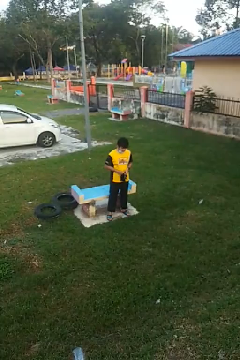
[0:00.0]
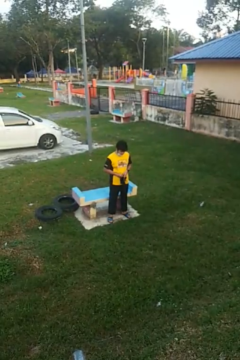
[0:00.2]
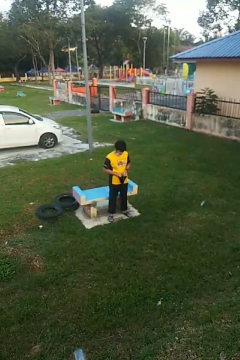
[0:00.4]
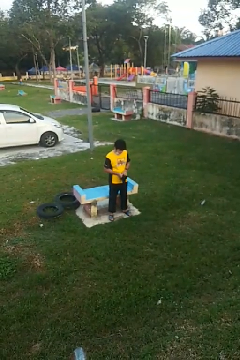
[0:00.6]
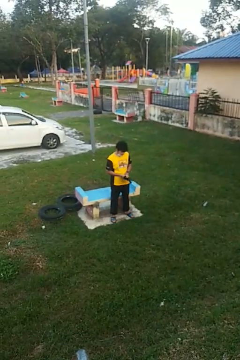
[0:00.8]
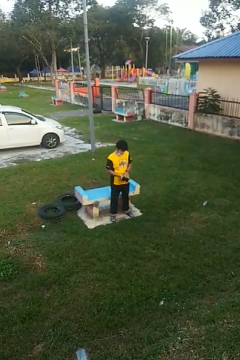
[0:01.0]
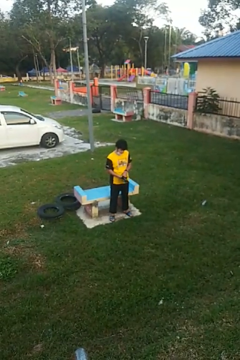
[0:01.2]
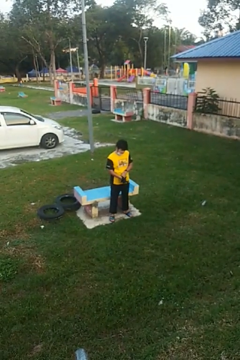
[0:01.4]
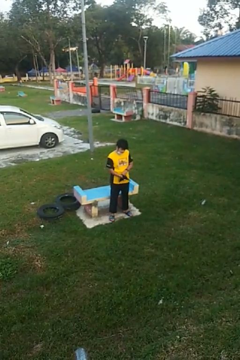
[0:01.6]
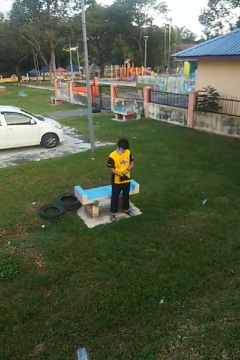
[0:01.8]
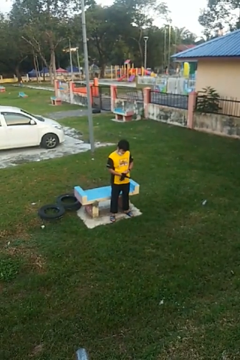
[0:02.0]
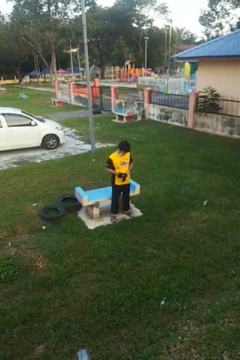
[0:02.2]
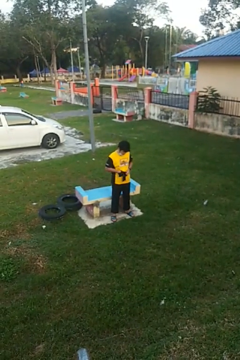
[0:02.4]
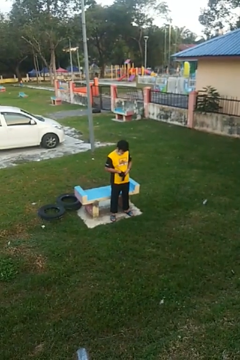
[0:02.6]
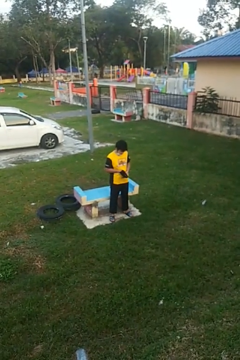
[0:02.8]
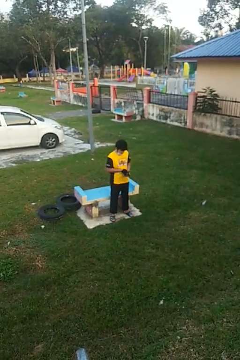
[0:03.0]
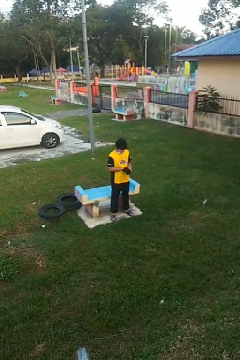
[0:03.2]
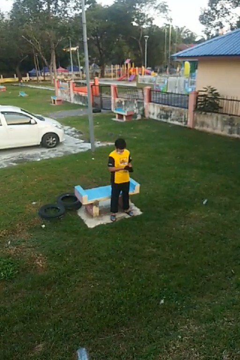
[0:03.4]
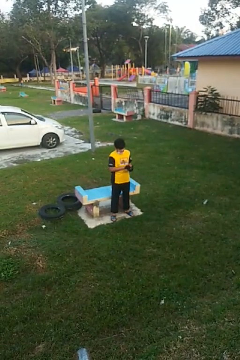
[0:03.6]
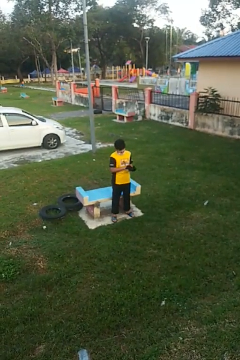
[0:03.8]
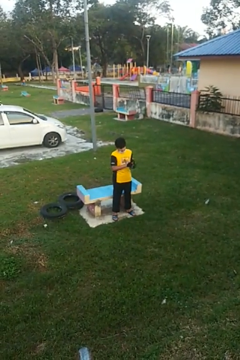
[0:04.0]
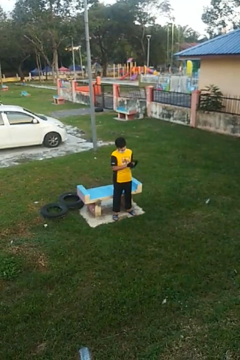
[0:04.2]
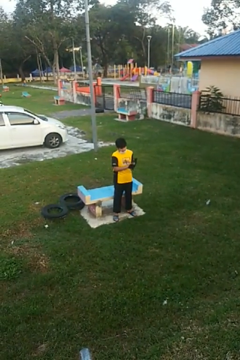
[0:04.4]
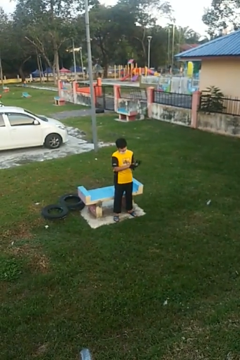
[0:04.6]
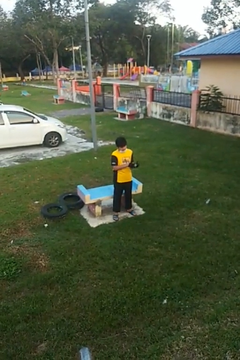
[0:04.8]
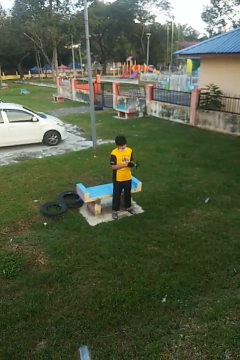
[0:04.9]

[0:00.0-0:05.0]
person puts on gloves

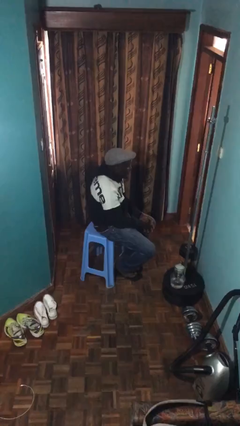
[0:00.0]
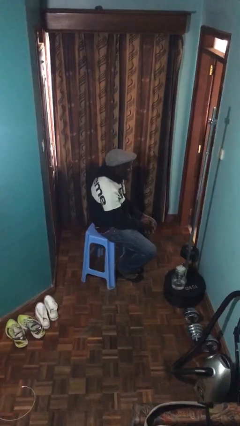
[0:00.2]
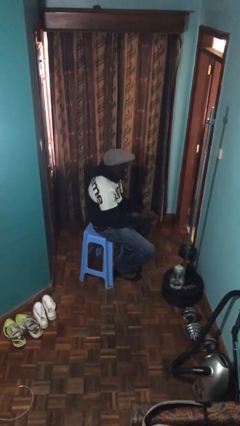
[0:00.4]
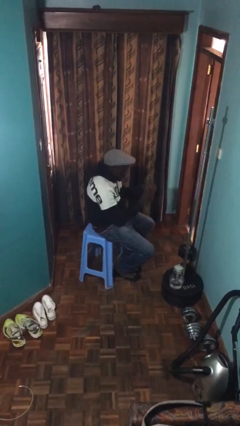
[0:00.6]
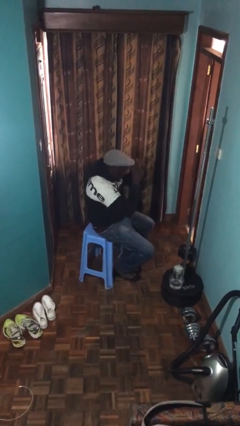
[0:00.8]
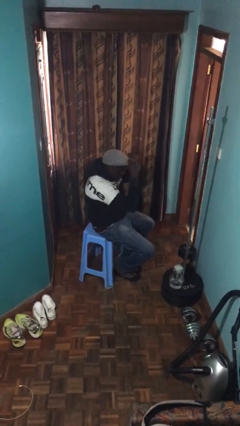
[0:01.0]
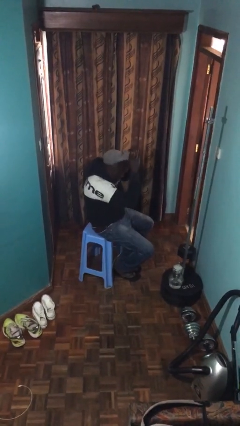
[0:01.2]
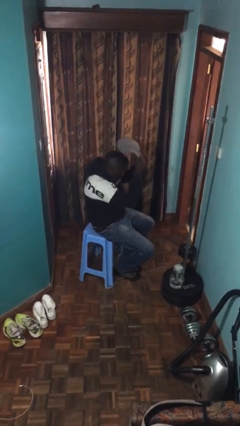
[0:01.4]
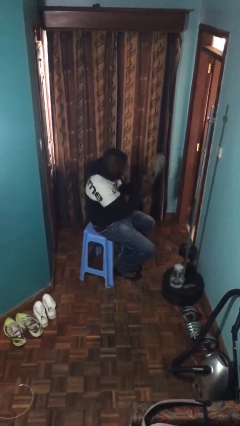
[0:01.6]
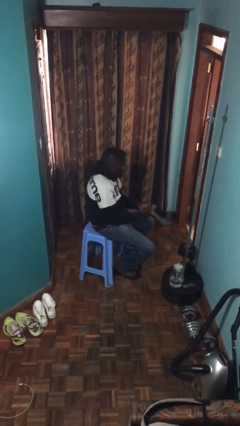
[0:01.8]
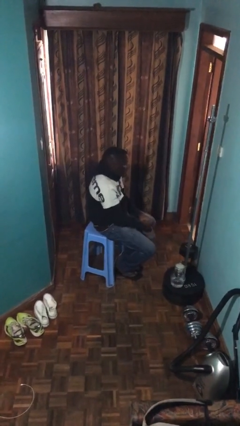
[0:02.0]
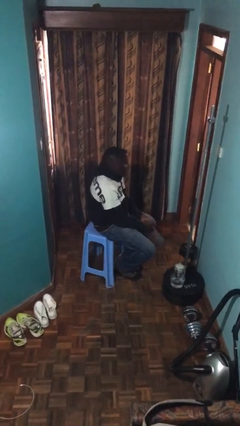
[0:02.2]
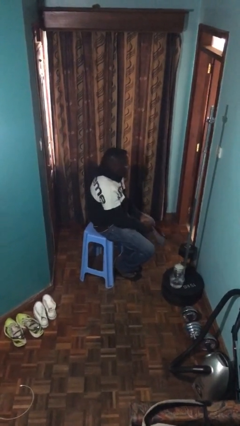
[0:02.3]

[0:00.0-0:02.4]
person takes off hat

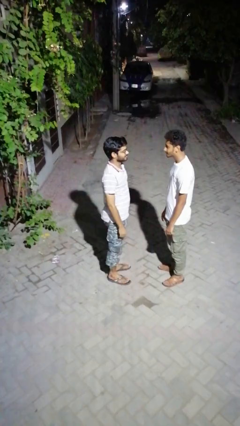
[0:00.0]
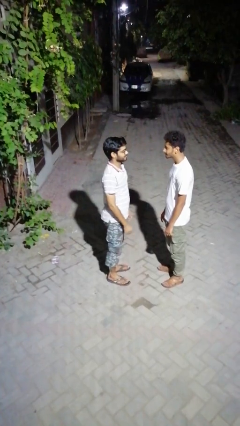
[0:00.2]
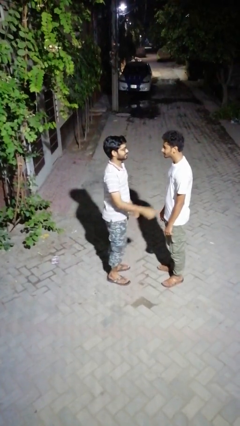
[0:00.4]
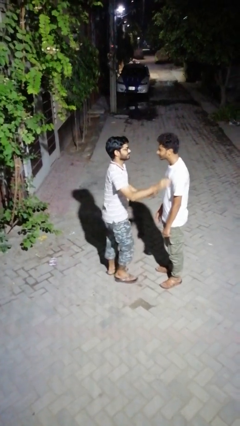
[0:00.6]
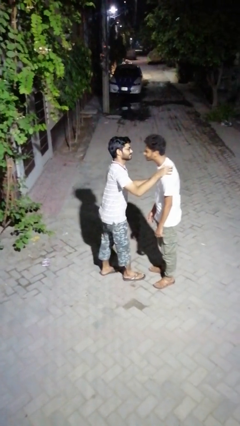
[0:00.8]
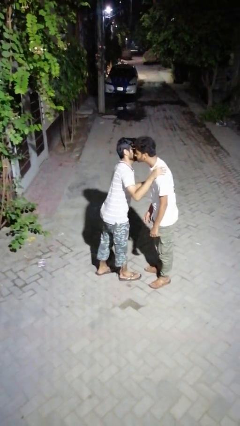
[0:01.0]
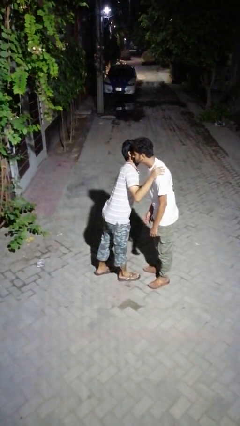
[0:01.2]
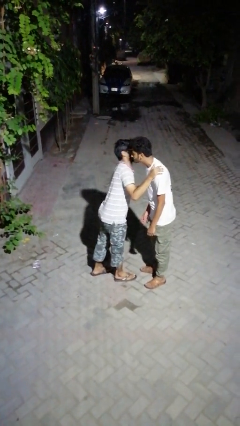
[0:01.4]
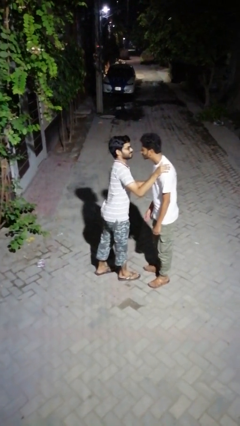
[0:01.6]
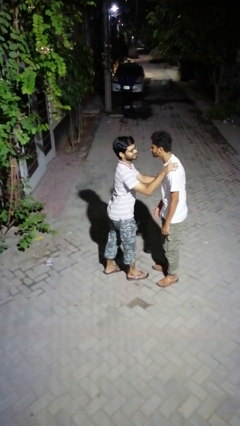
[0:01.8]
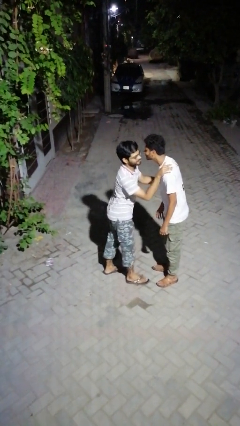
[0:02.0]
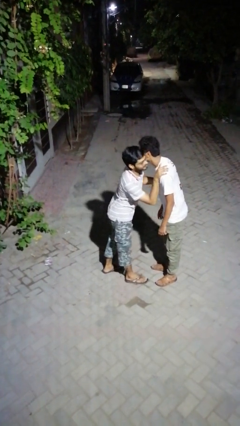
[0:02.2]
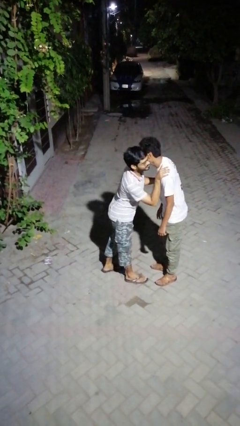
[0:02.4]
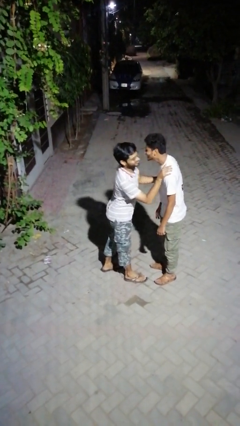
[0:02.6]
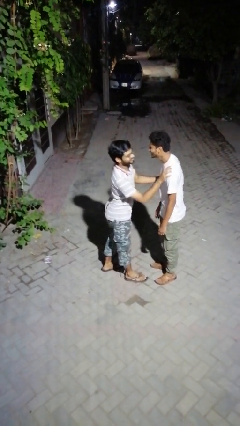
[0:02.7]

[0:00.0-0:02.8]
person kisses cheek of person

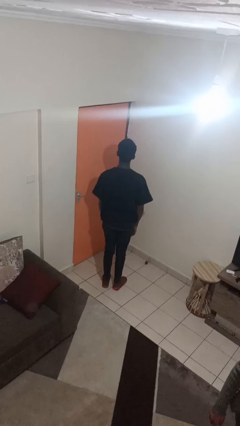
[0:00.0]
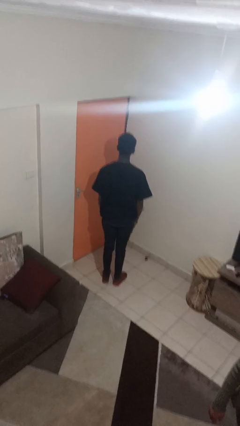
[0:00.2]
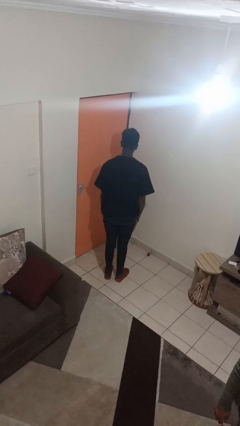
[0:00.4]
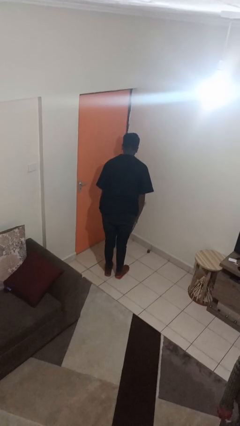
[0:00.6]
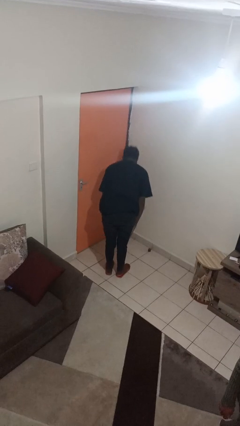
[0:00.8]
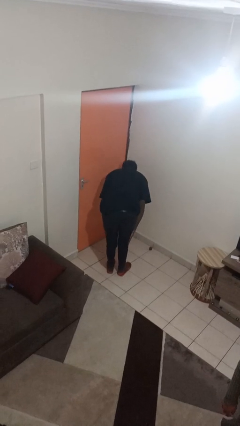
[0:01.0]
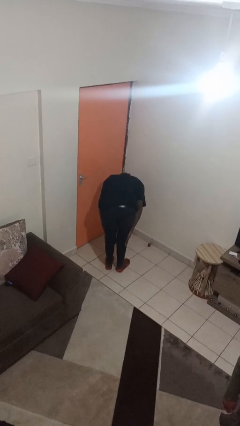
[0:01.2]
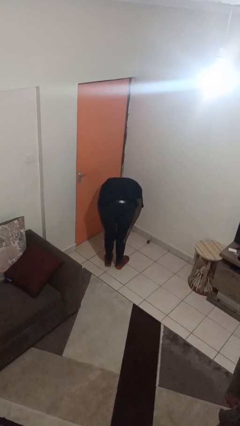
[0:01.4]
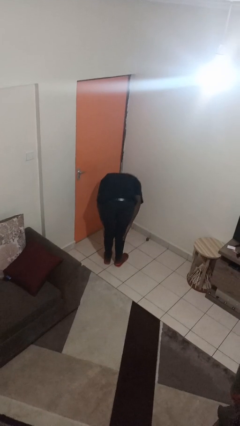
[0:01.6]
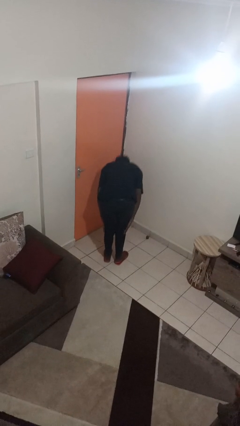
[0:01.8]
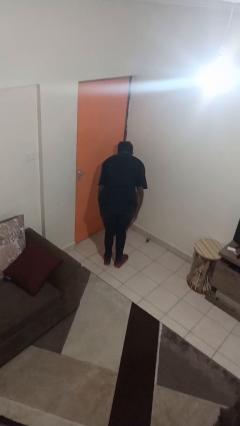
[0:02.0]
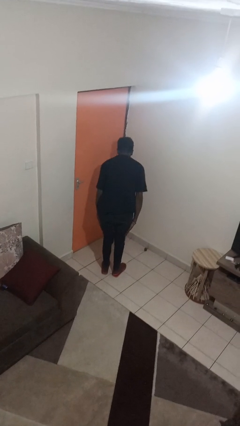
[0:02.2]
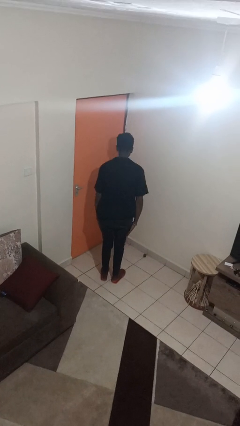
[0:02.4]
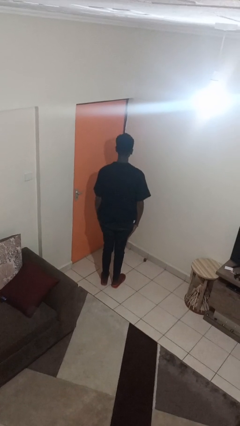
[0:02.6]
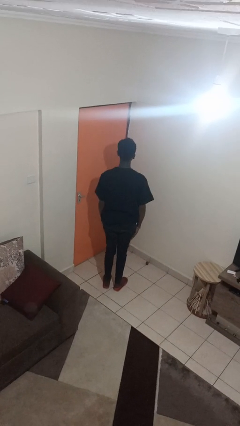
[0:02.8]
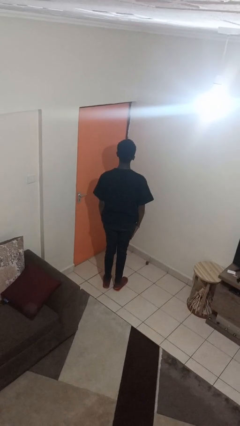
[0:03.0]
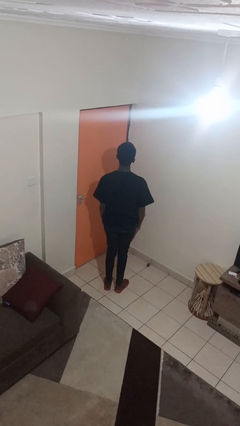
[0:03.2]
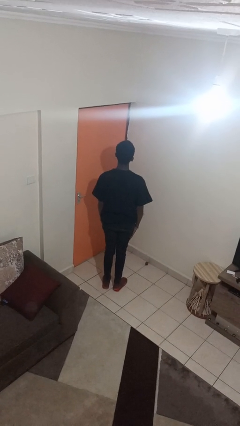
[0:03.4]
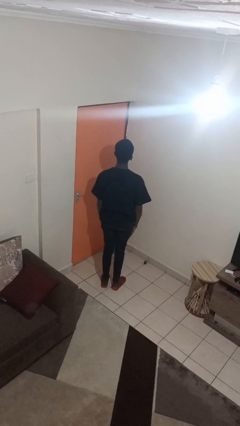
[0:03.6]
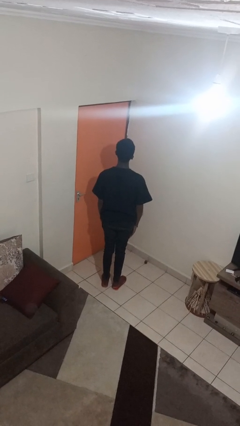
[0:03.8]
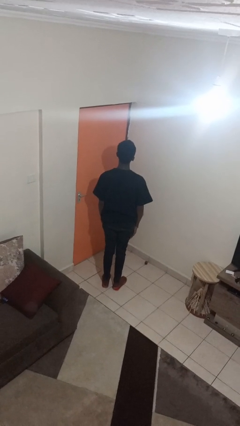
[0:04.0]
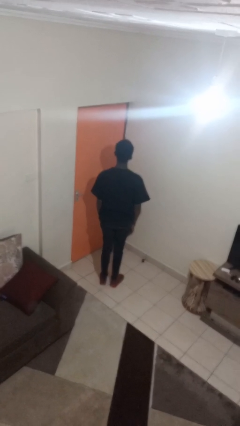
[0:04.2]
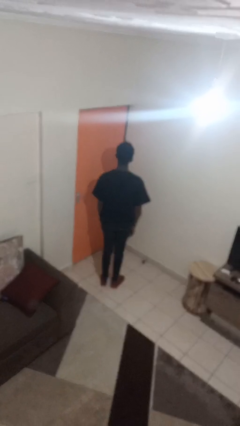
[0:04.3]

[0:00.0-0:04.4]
person bows

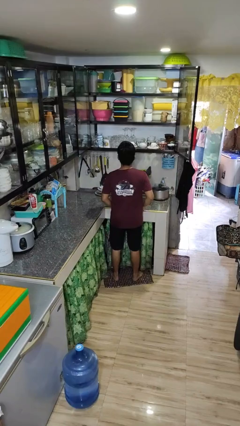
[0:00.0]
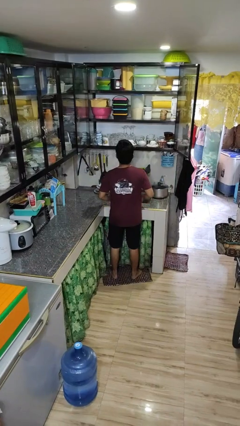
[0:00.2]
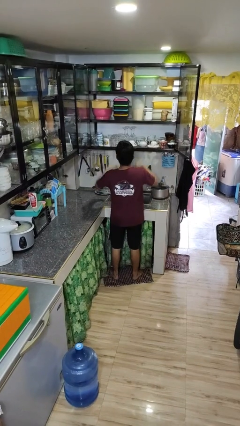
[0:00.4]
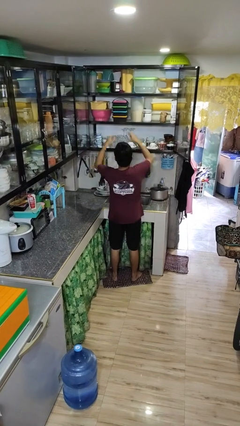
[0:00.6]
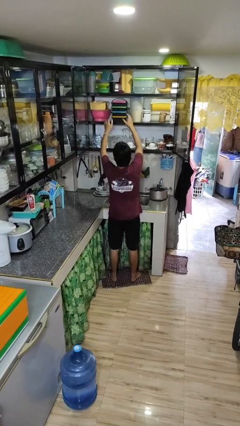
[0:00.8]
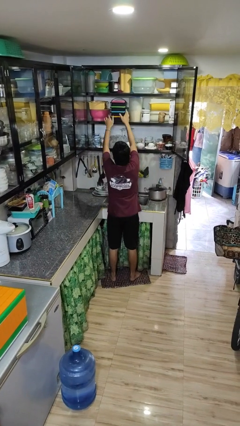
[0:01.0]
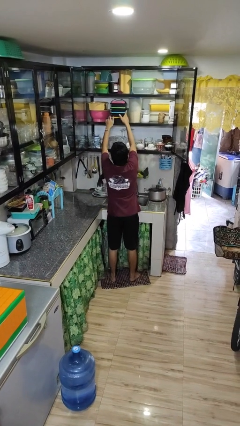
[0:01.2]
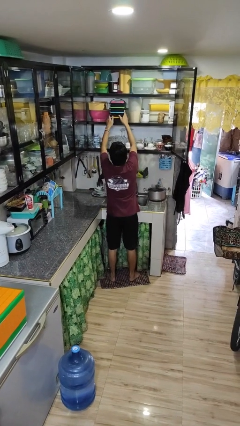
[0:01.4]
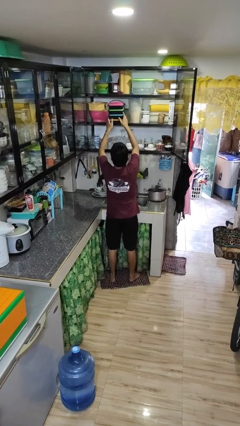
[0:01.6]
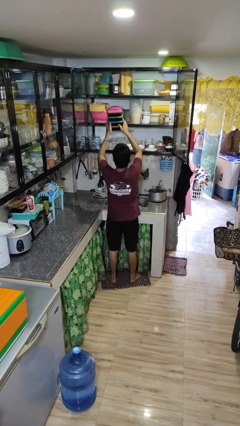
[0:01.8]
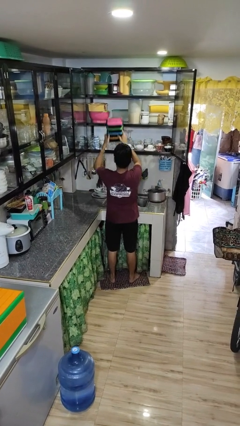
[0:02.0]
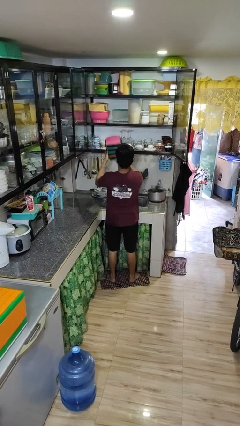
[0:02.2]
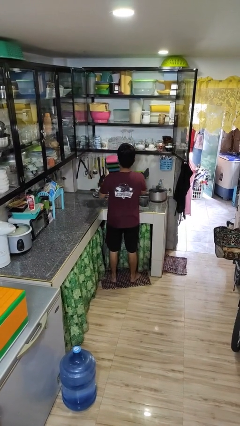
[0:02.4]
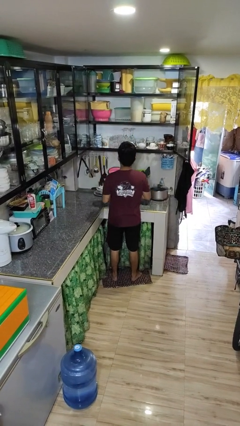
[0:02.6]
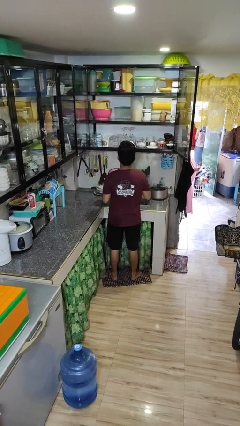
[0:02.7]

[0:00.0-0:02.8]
person picks up object from cabinet
